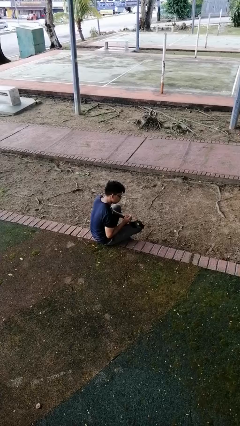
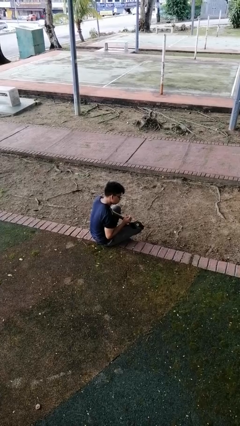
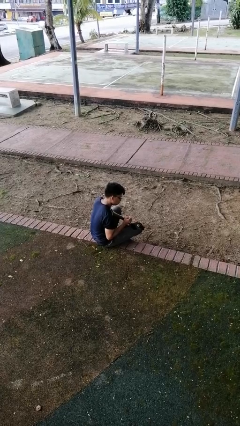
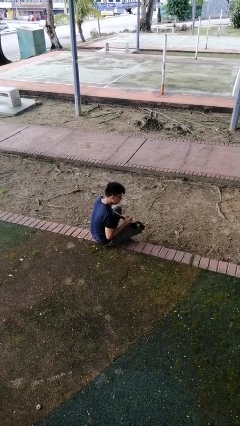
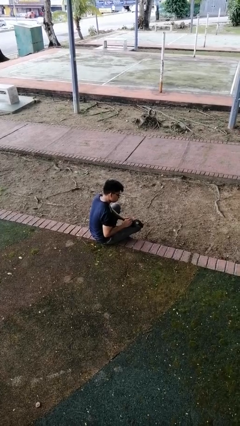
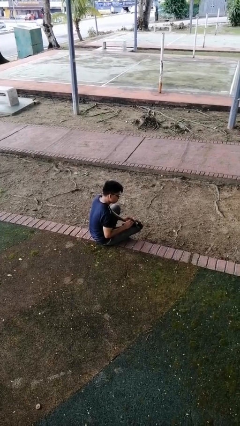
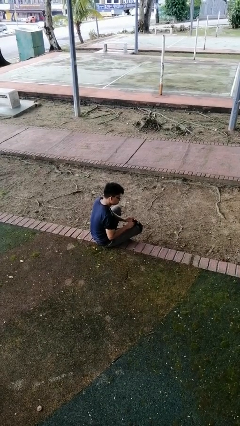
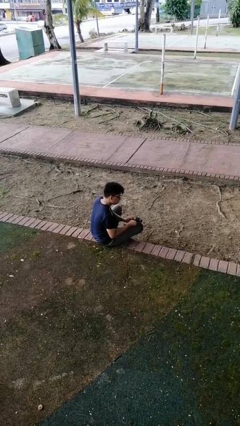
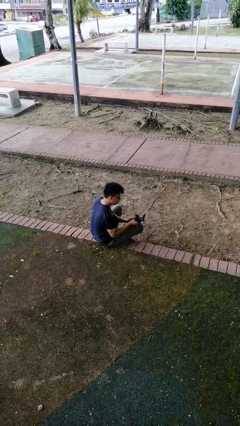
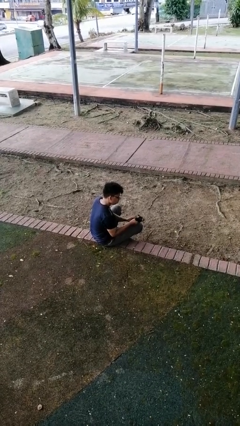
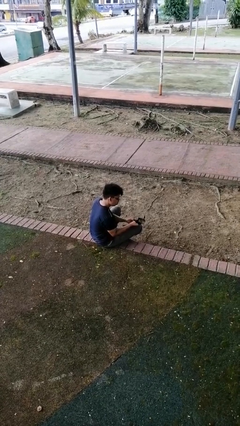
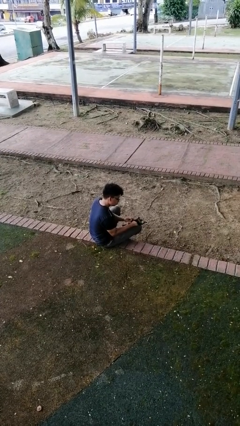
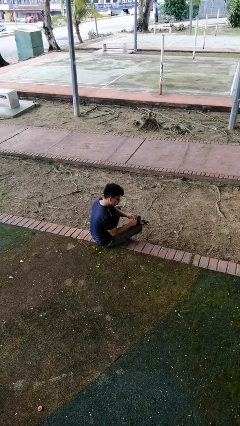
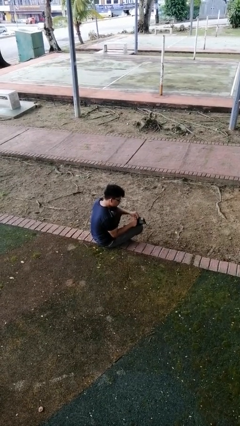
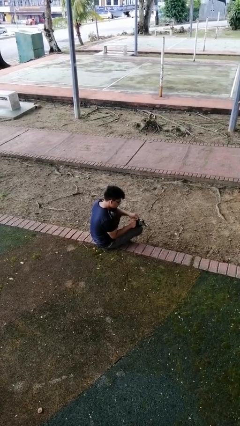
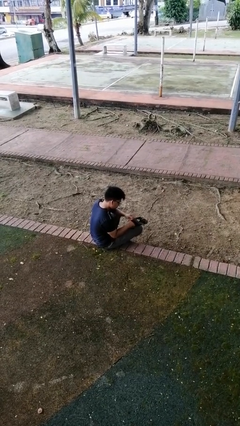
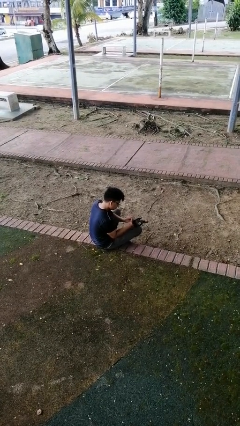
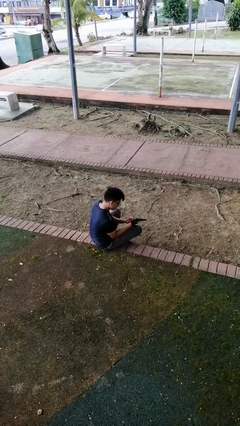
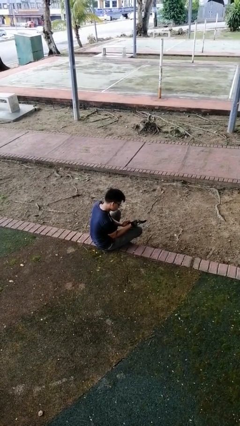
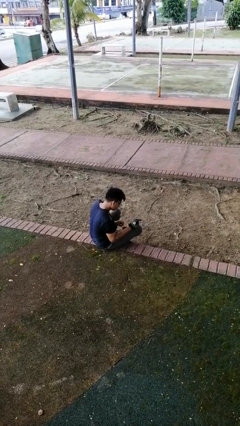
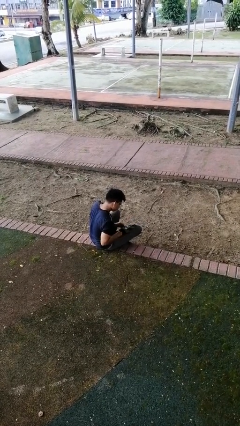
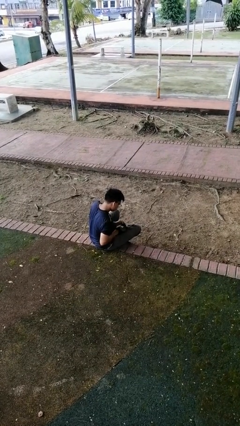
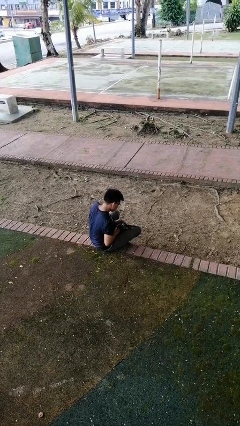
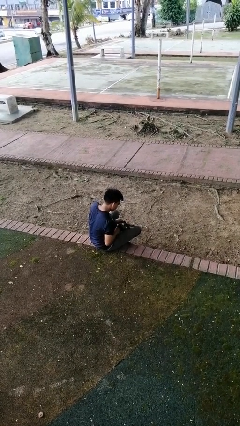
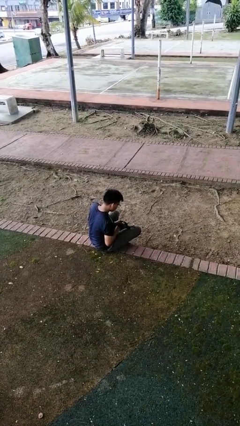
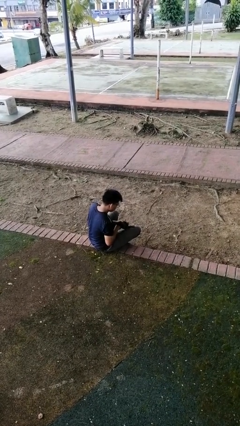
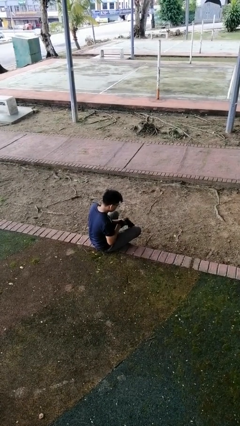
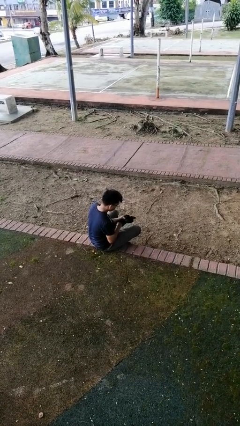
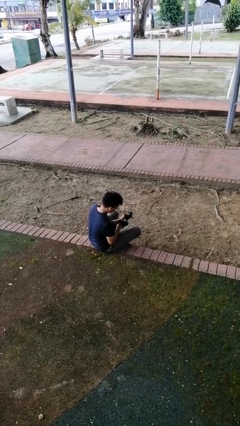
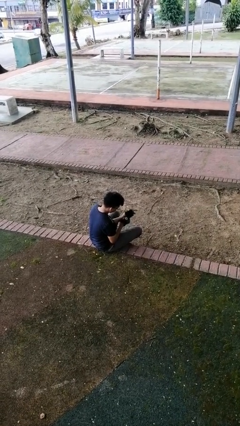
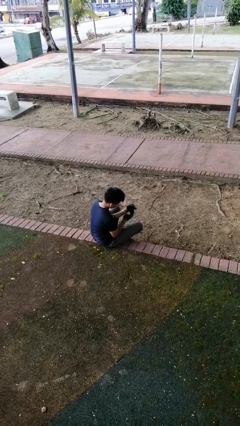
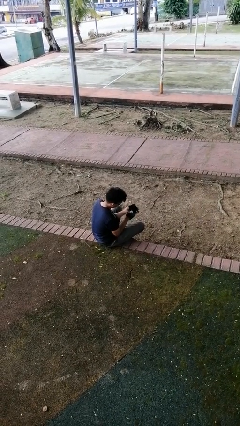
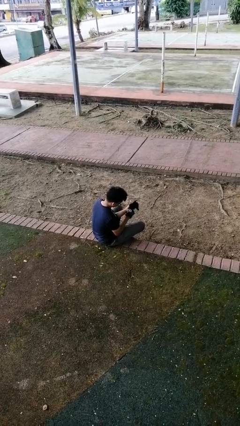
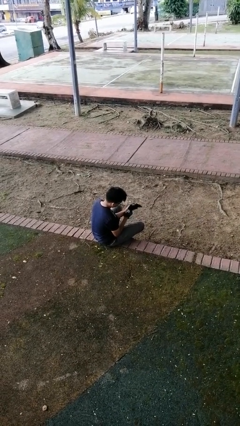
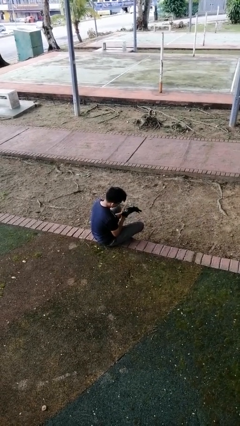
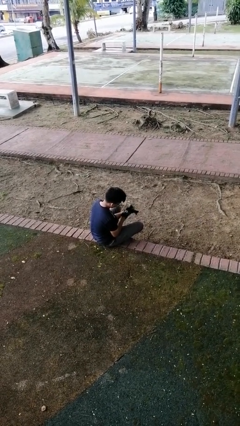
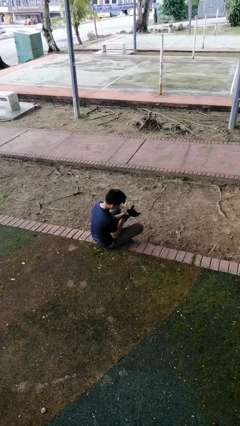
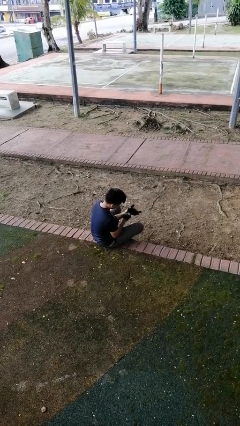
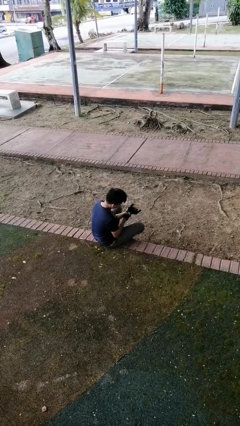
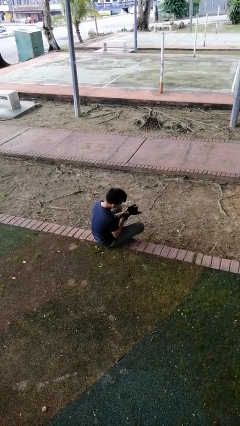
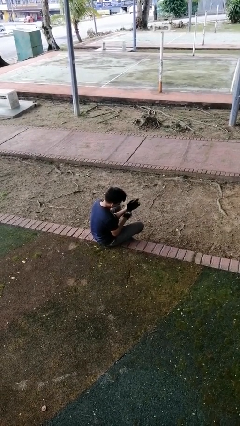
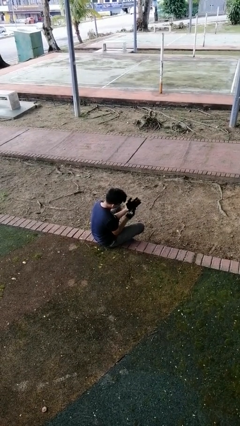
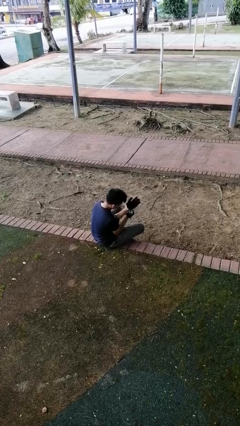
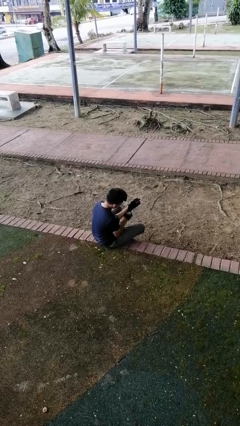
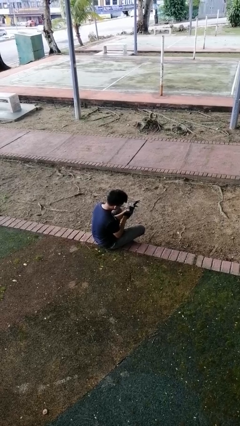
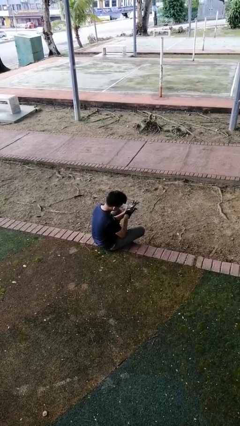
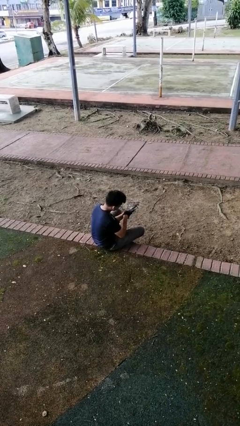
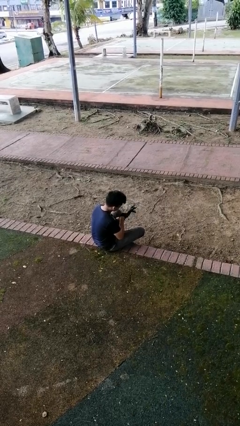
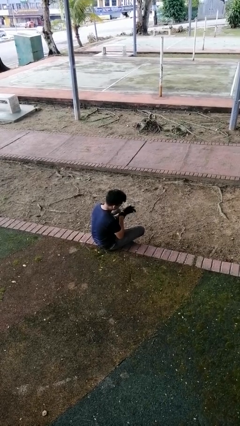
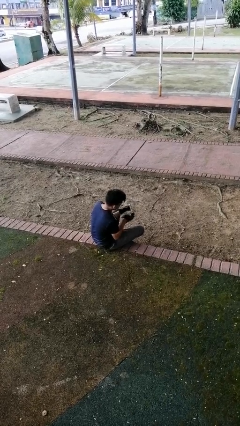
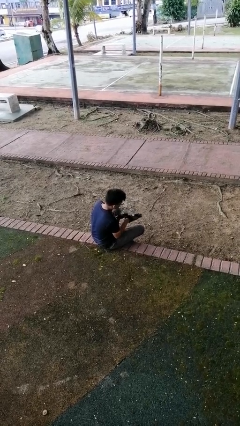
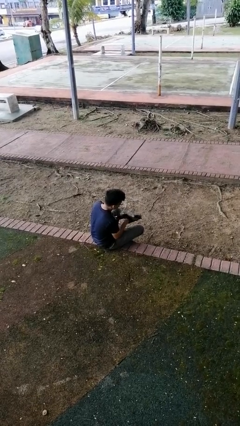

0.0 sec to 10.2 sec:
person puts on gloves

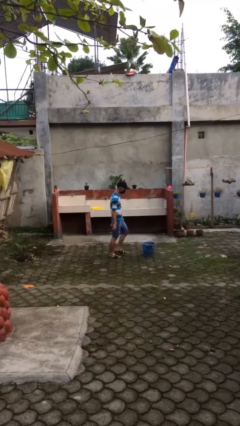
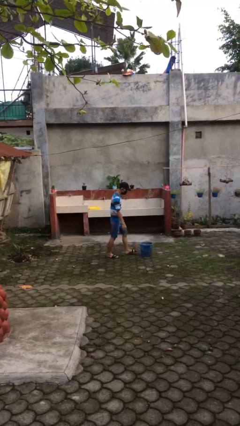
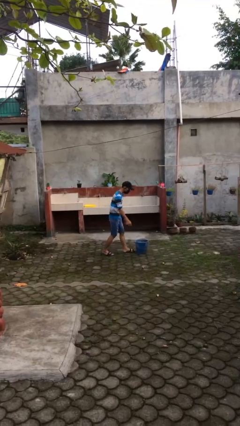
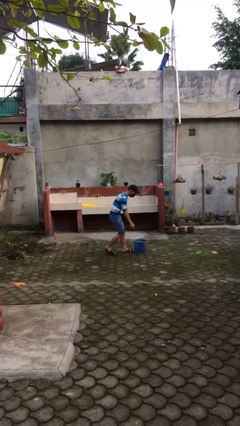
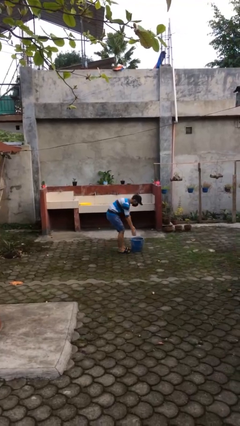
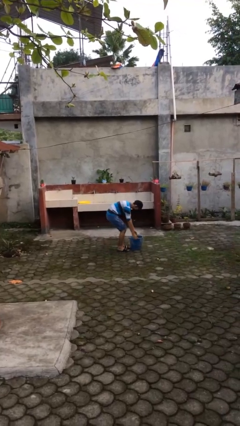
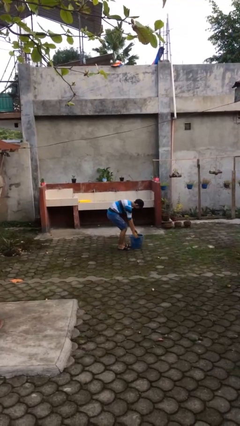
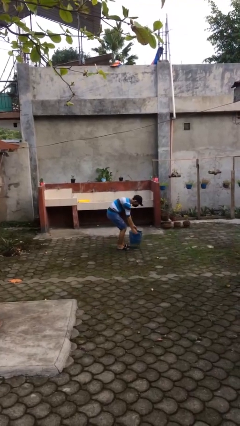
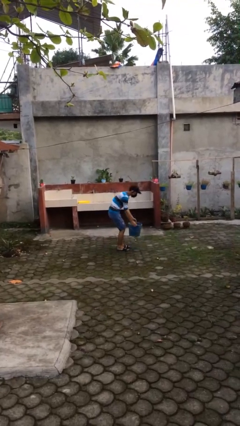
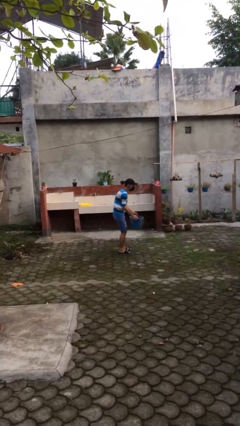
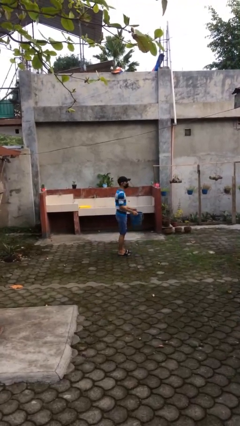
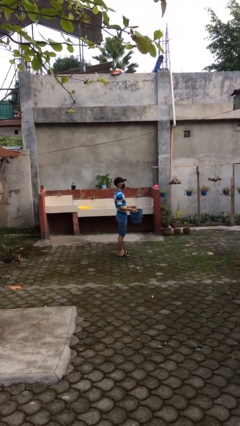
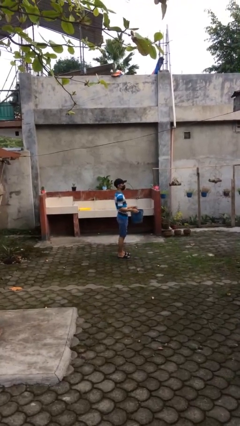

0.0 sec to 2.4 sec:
person picks up object from floor

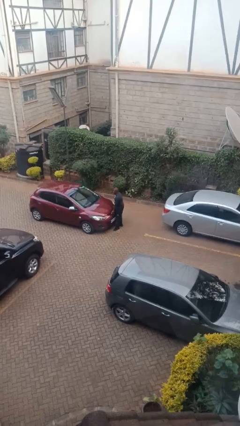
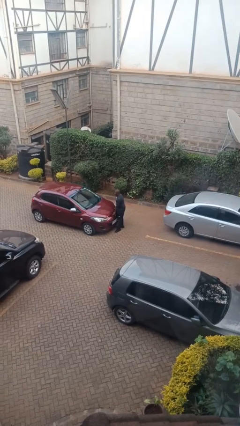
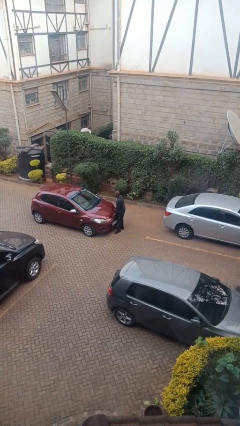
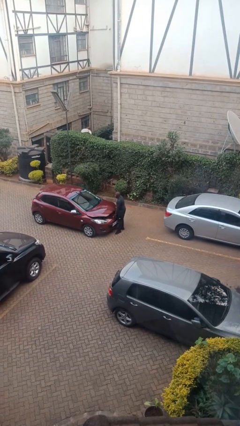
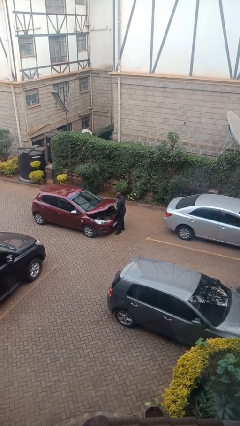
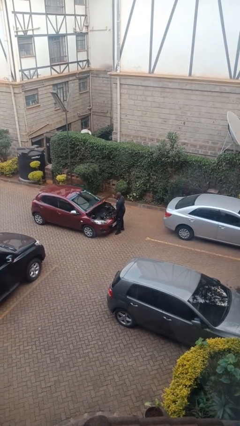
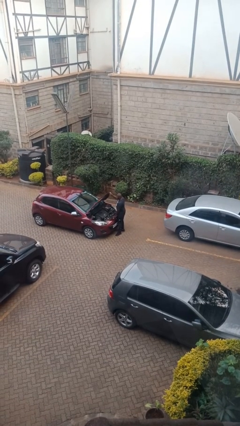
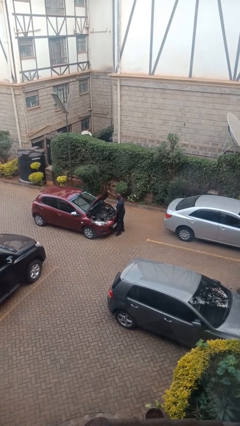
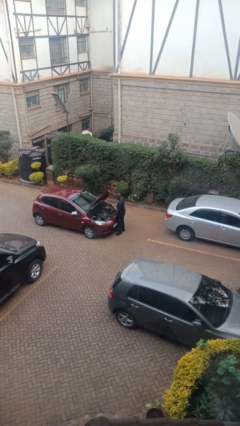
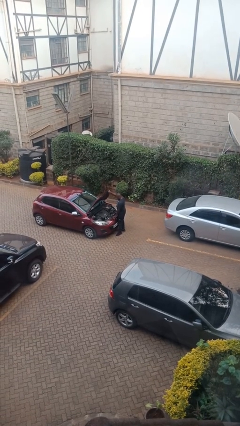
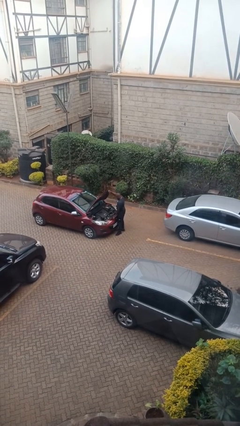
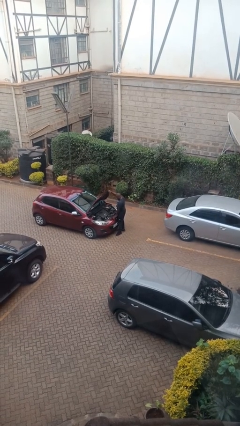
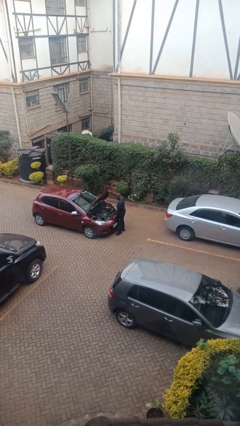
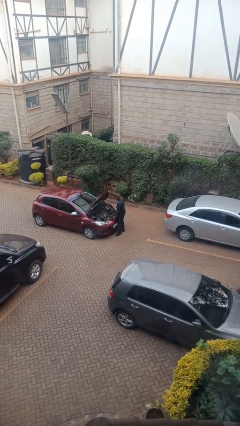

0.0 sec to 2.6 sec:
person opens car hood

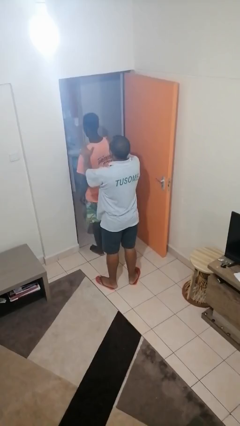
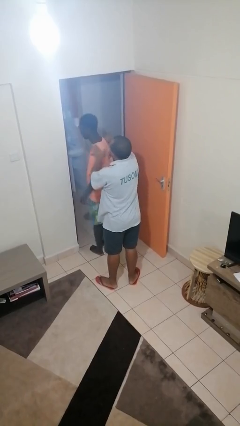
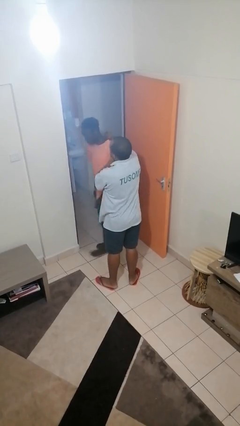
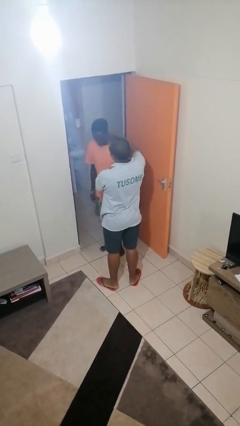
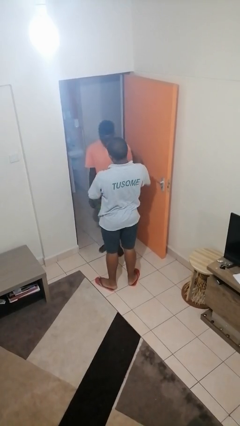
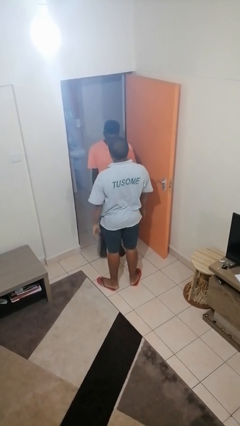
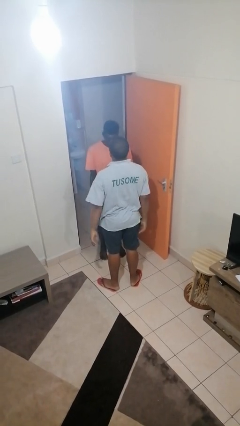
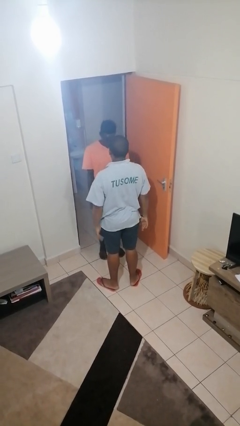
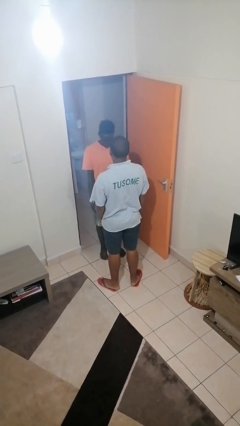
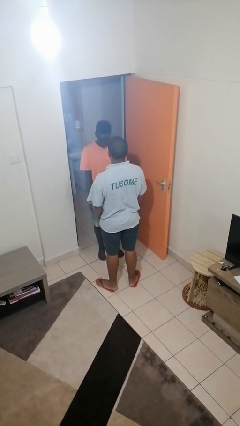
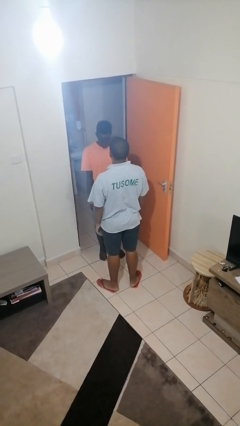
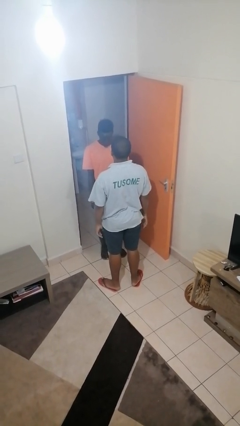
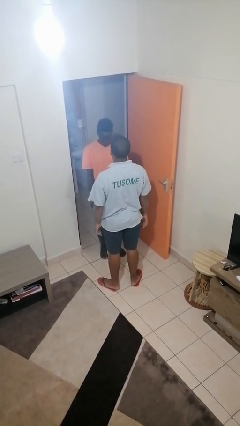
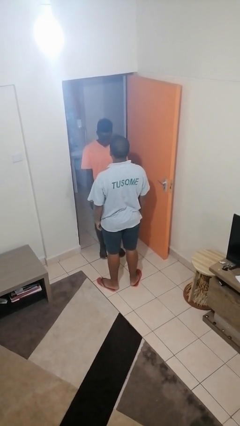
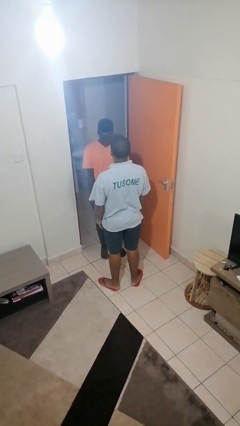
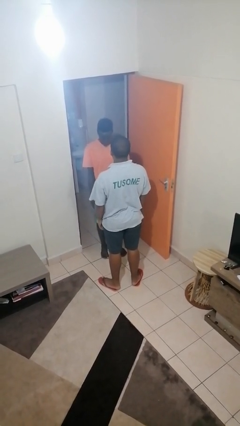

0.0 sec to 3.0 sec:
person spins person around
